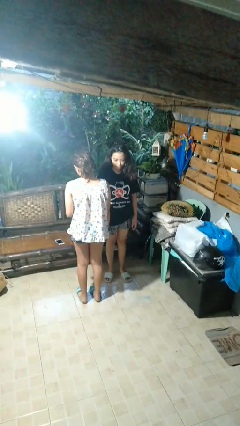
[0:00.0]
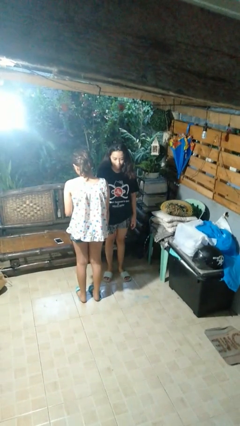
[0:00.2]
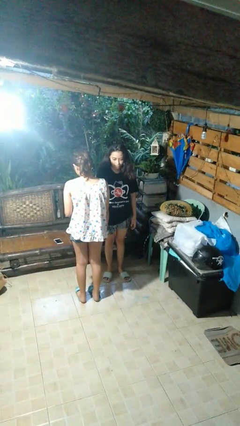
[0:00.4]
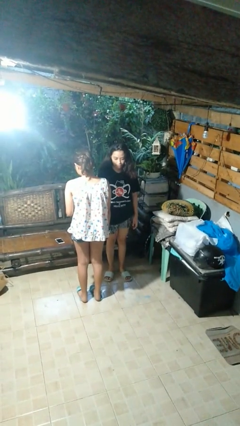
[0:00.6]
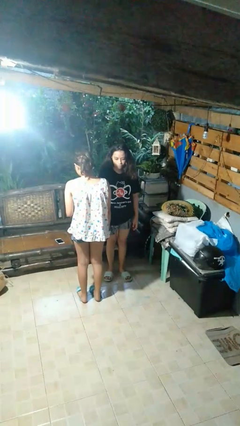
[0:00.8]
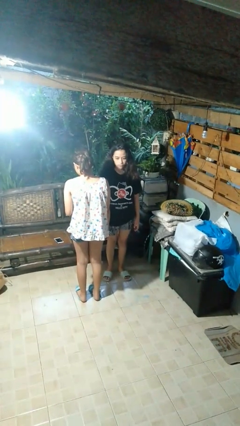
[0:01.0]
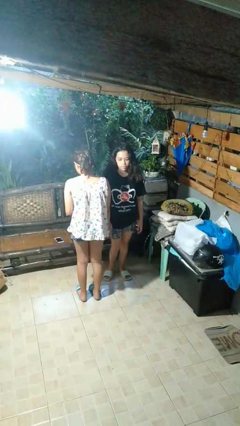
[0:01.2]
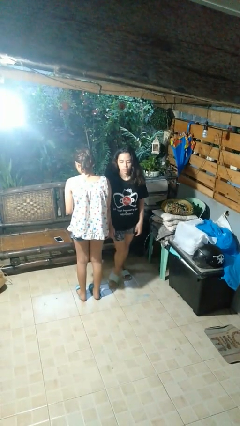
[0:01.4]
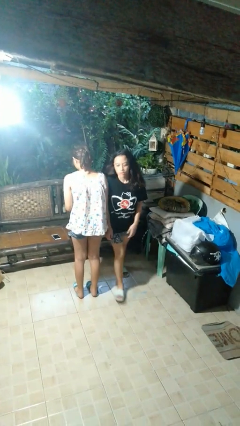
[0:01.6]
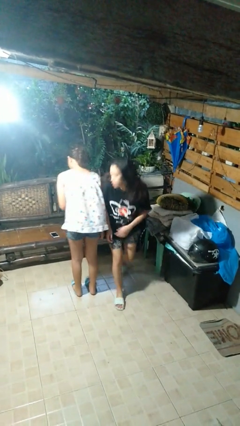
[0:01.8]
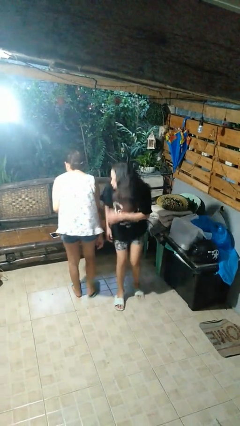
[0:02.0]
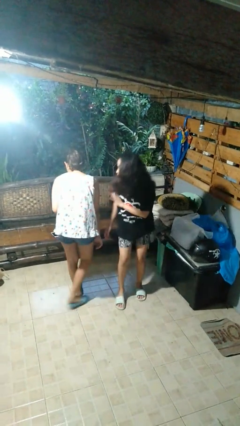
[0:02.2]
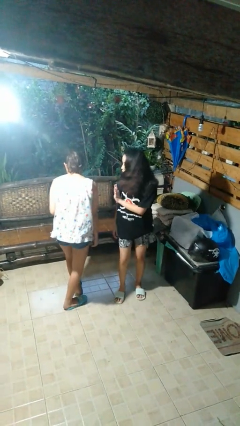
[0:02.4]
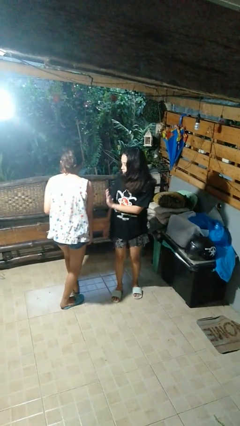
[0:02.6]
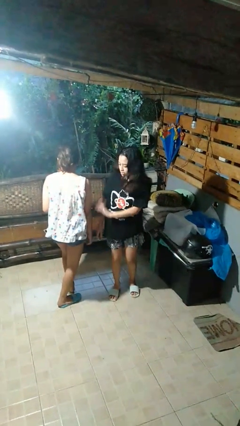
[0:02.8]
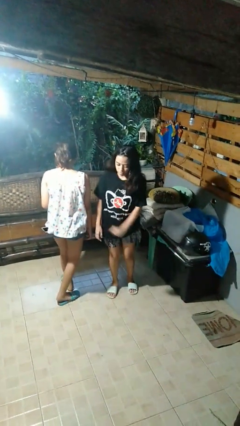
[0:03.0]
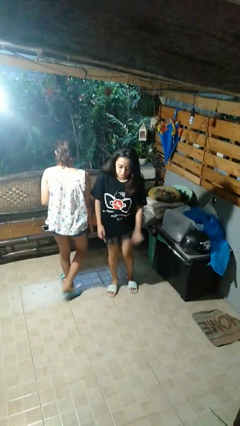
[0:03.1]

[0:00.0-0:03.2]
person bumps into person

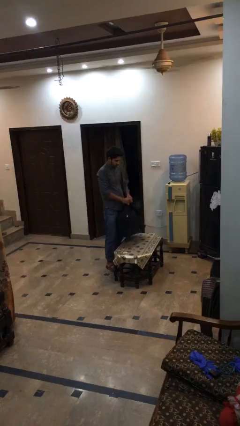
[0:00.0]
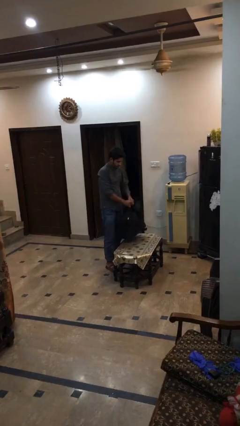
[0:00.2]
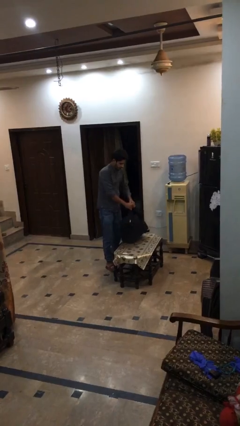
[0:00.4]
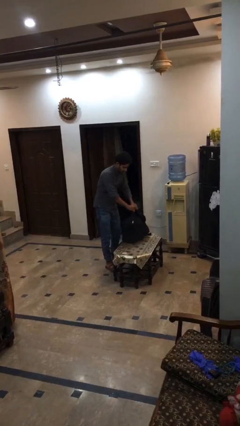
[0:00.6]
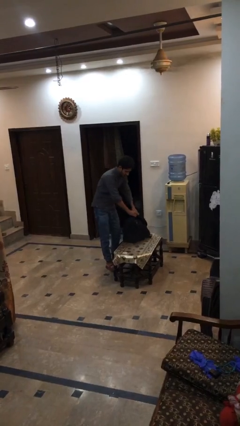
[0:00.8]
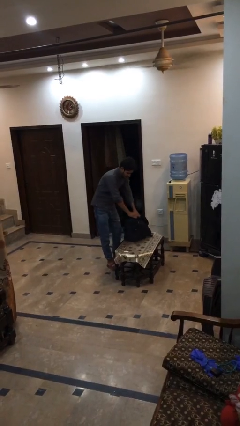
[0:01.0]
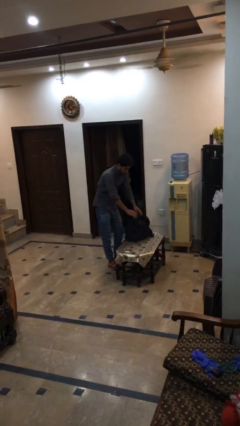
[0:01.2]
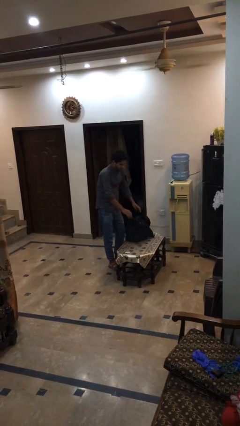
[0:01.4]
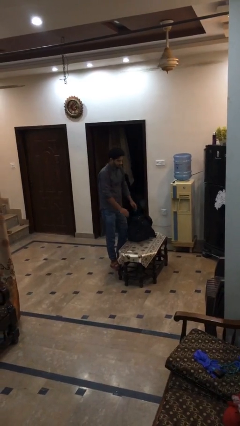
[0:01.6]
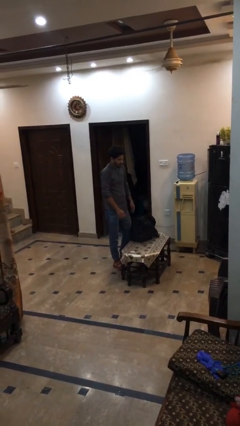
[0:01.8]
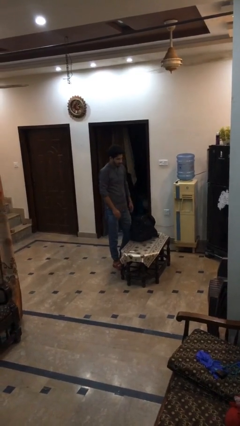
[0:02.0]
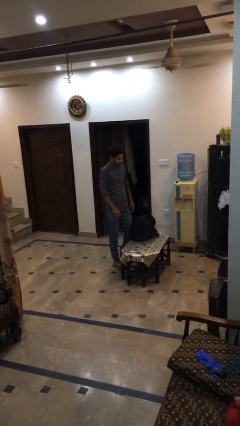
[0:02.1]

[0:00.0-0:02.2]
person puts down object on table

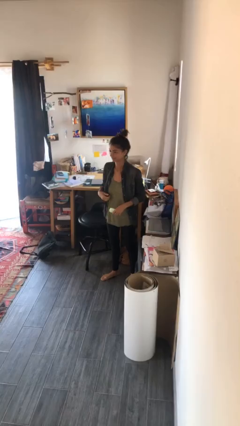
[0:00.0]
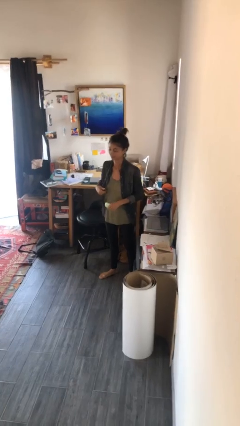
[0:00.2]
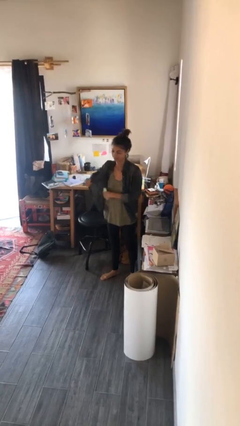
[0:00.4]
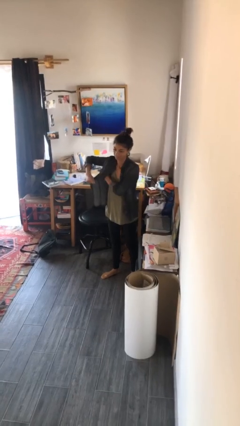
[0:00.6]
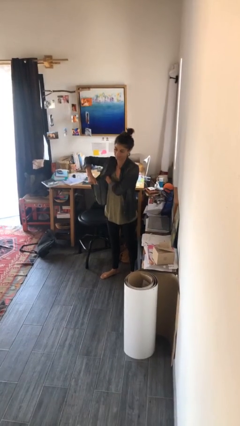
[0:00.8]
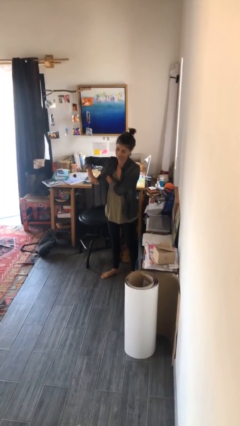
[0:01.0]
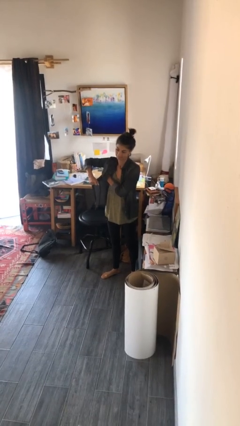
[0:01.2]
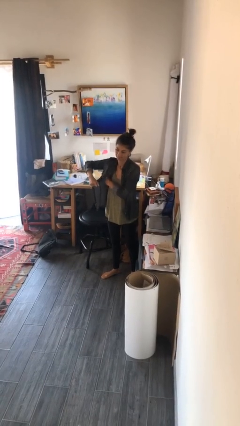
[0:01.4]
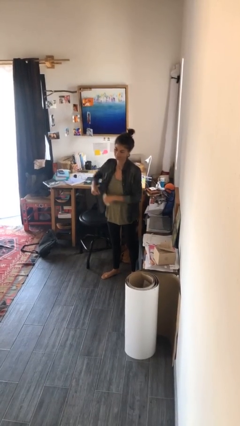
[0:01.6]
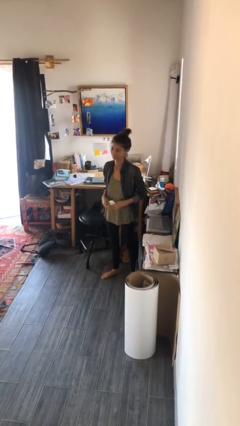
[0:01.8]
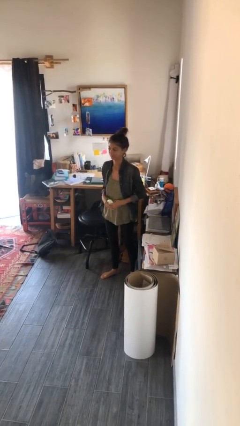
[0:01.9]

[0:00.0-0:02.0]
person applies deodorant

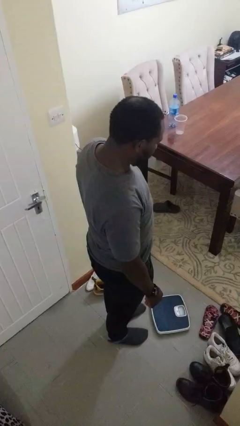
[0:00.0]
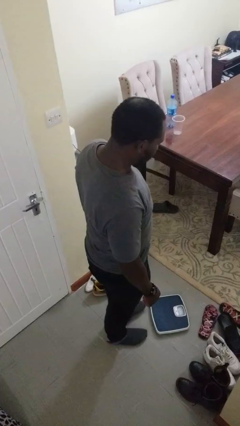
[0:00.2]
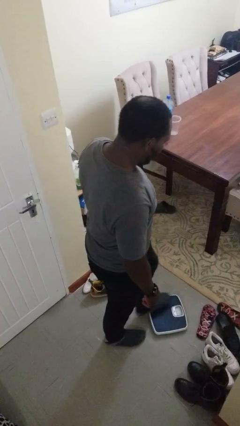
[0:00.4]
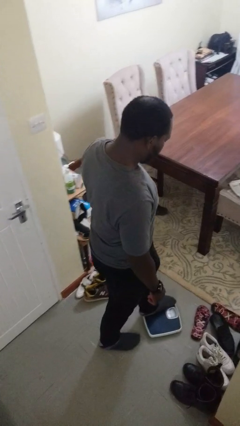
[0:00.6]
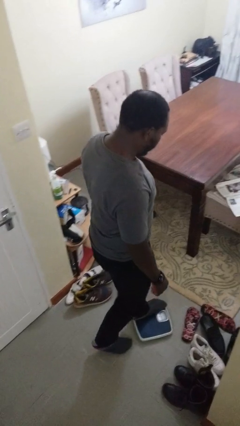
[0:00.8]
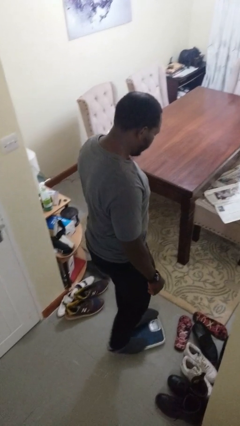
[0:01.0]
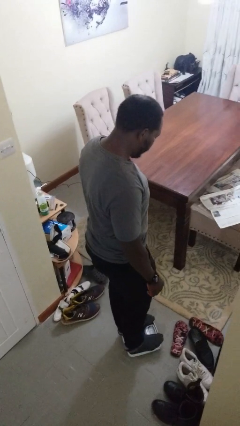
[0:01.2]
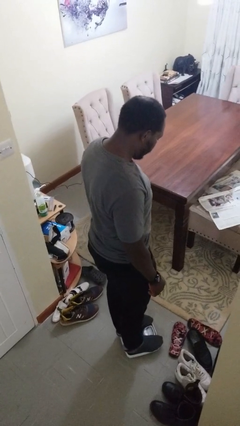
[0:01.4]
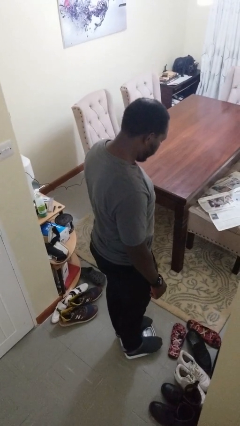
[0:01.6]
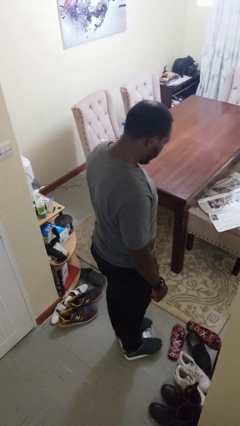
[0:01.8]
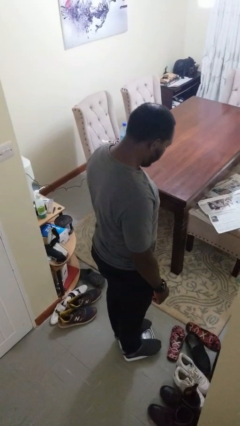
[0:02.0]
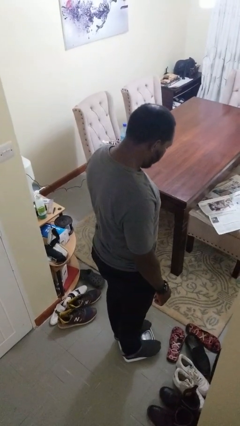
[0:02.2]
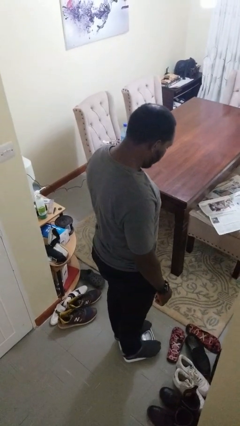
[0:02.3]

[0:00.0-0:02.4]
person uses bodyweight scale

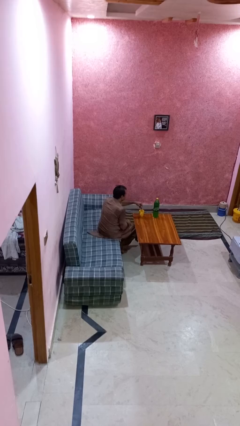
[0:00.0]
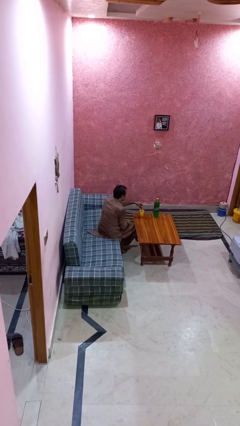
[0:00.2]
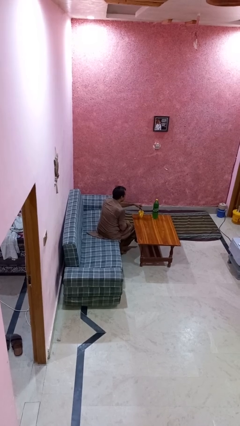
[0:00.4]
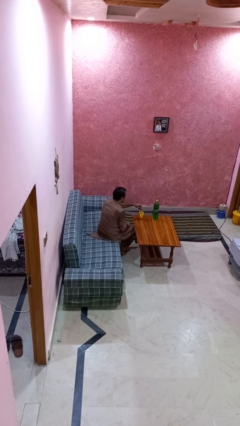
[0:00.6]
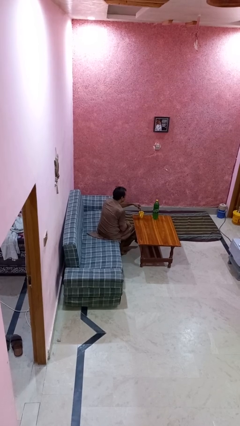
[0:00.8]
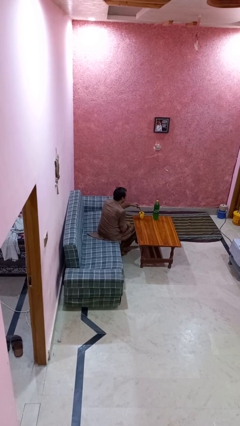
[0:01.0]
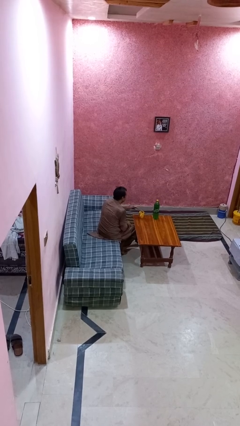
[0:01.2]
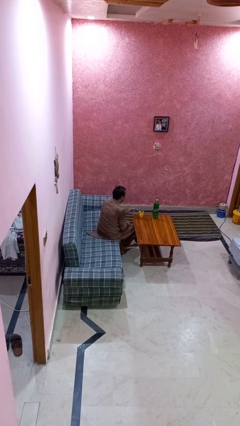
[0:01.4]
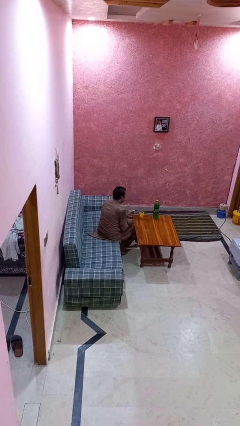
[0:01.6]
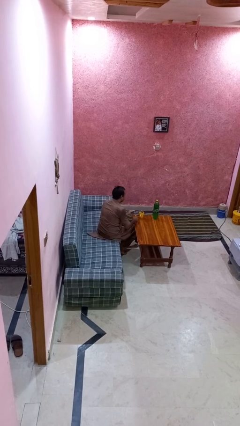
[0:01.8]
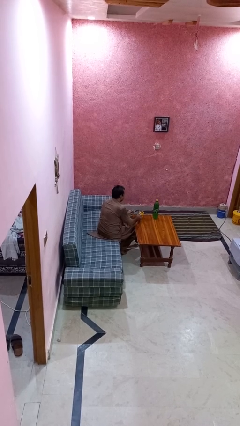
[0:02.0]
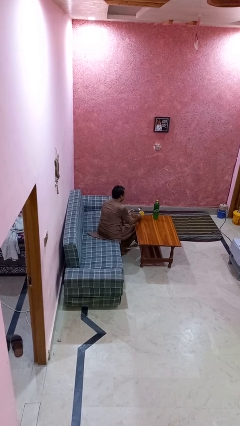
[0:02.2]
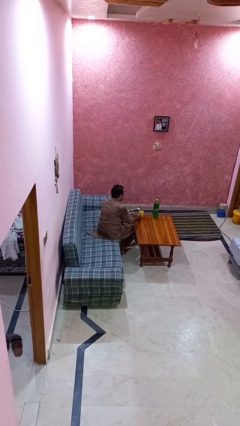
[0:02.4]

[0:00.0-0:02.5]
person stirs mug

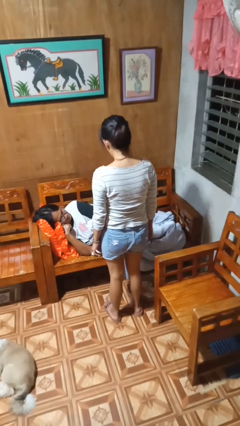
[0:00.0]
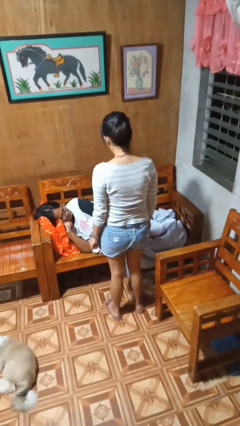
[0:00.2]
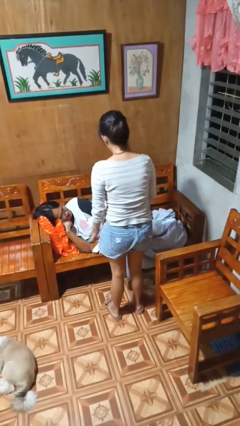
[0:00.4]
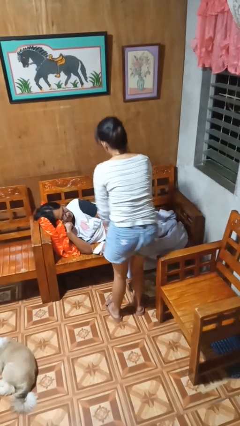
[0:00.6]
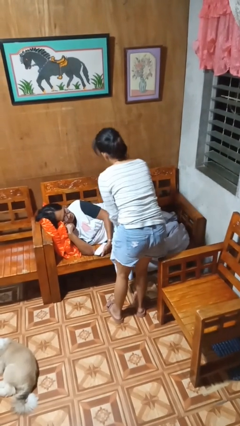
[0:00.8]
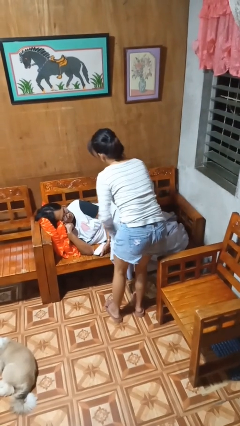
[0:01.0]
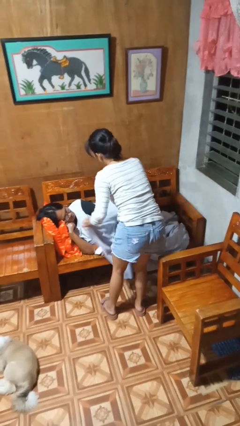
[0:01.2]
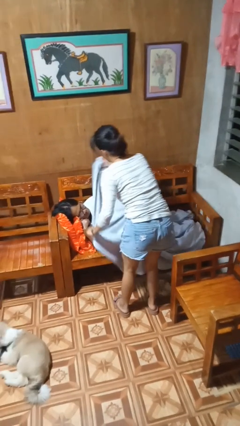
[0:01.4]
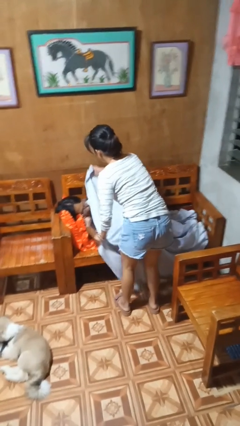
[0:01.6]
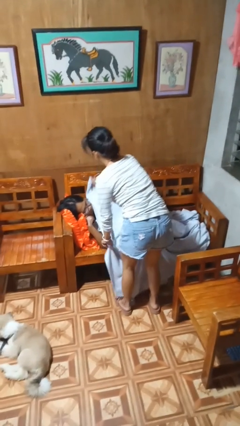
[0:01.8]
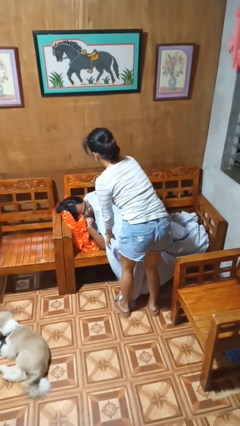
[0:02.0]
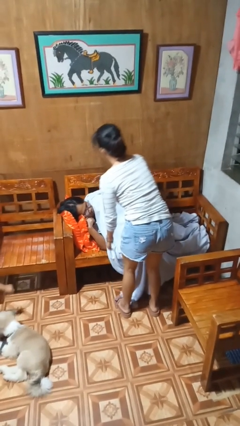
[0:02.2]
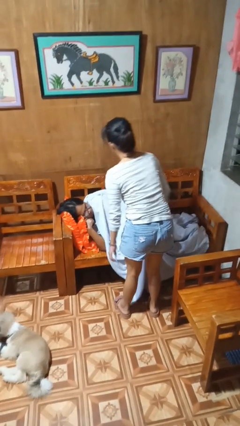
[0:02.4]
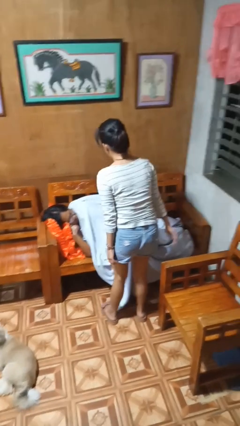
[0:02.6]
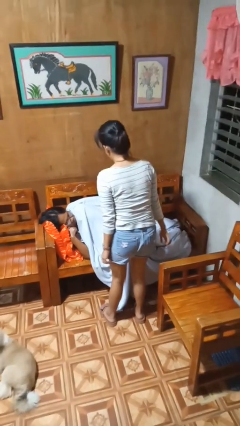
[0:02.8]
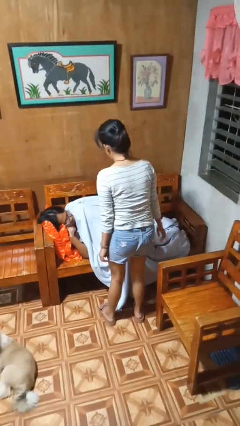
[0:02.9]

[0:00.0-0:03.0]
person covers friend with blanket

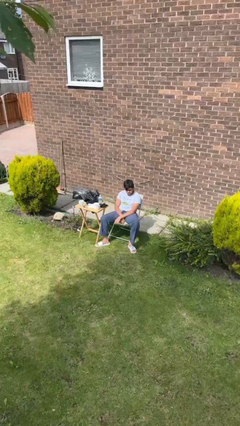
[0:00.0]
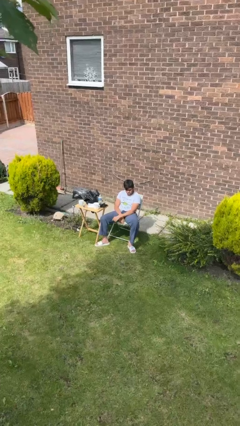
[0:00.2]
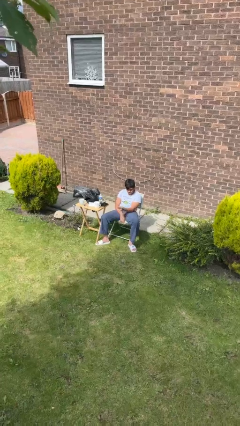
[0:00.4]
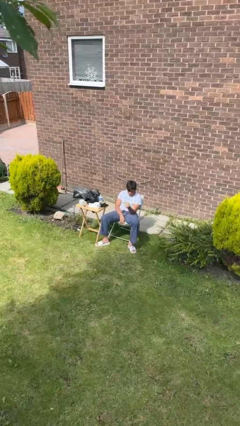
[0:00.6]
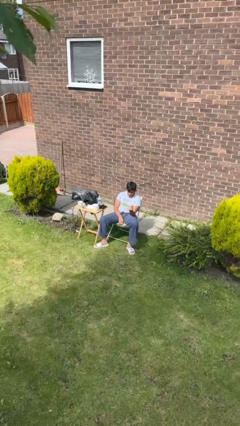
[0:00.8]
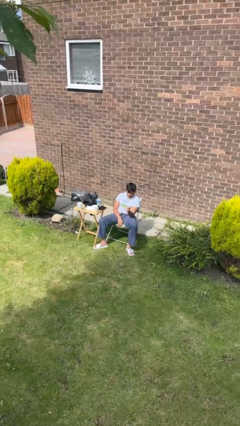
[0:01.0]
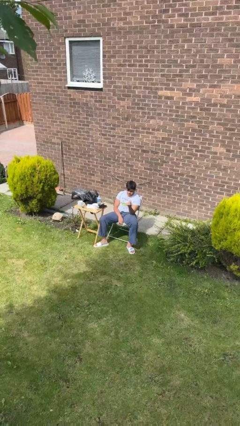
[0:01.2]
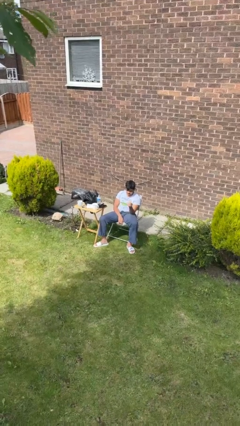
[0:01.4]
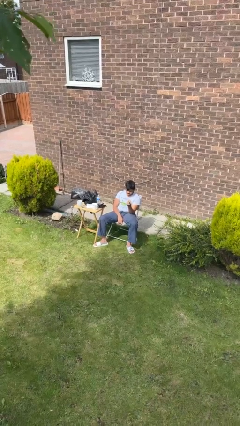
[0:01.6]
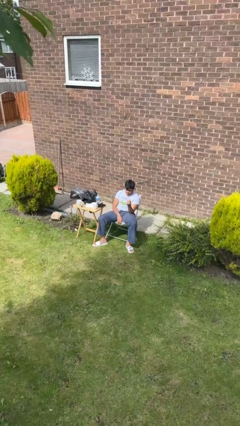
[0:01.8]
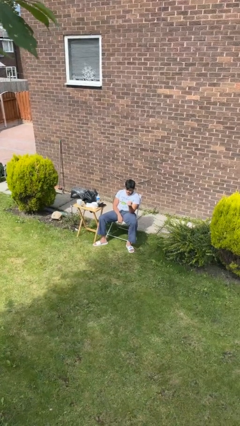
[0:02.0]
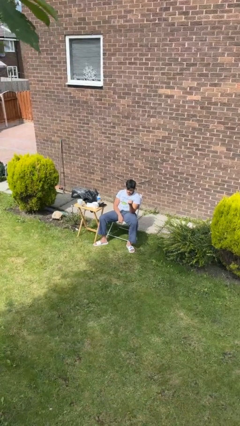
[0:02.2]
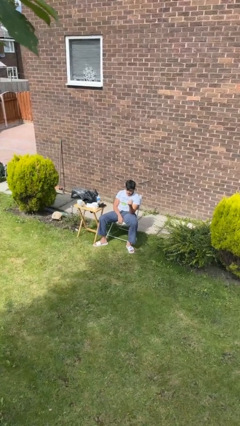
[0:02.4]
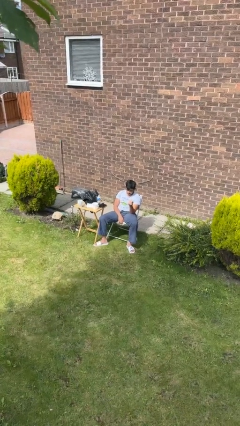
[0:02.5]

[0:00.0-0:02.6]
person snaps fingers
